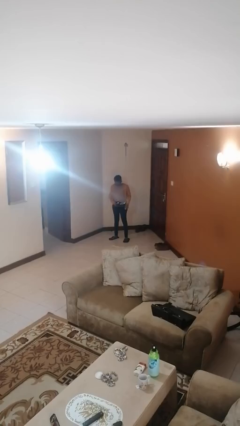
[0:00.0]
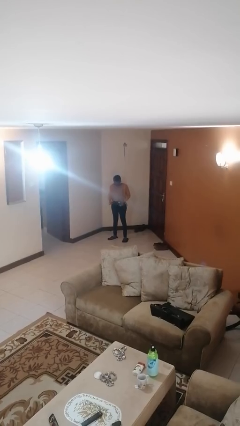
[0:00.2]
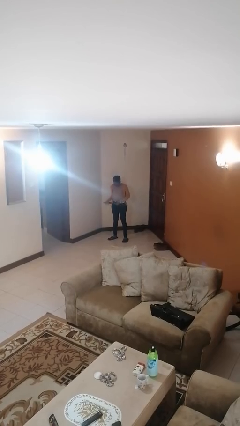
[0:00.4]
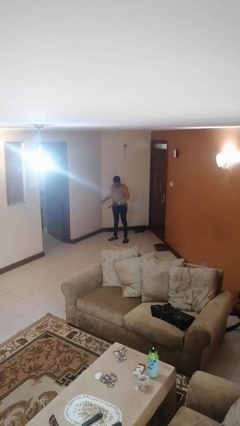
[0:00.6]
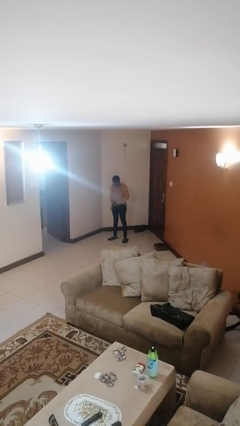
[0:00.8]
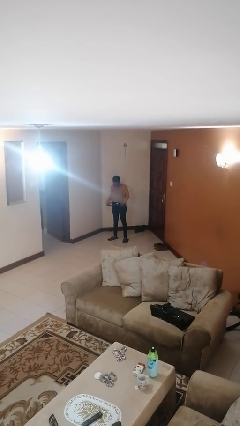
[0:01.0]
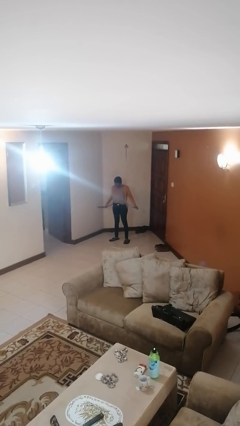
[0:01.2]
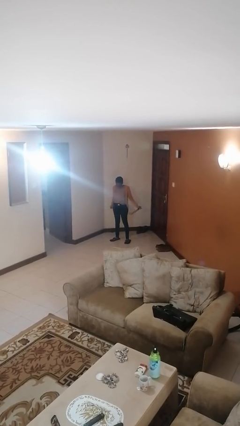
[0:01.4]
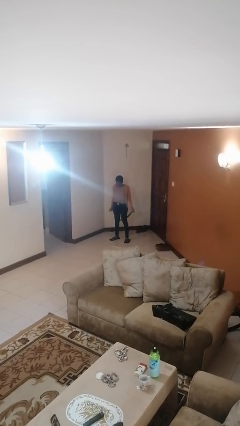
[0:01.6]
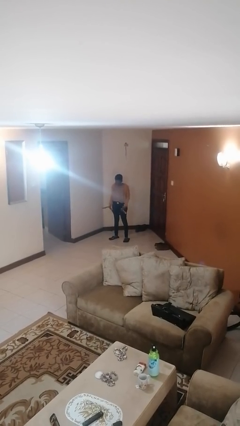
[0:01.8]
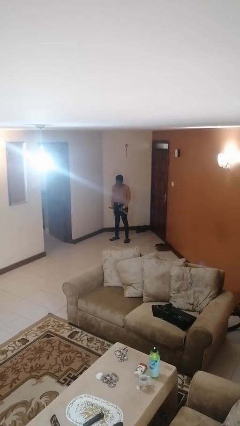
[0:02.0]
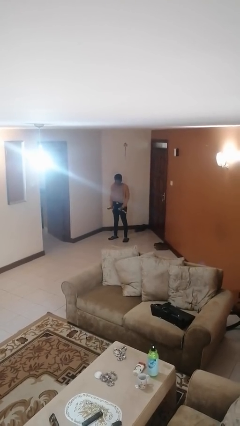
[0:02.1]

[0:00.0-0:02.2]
person takes off belt

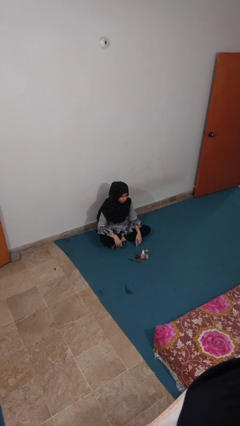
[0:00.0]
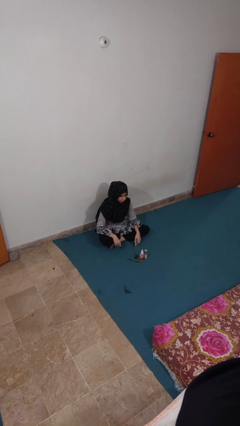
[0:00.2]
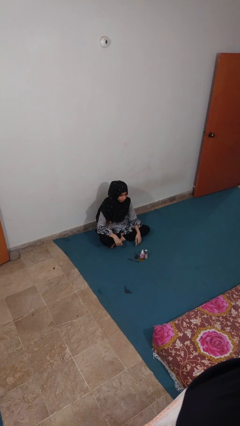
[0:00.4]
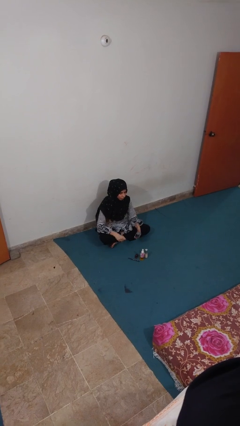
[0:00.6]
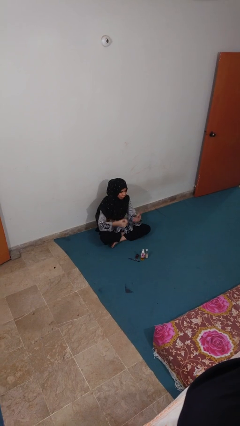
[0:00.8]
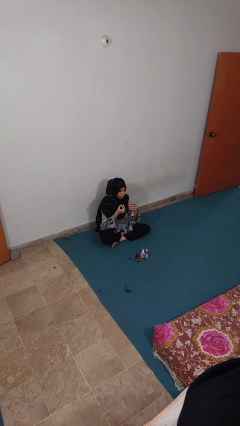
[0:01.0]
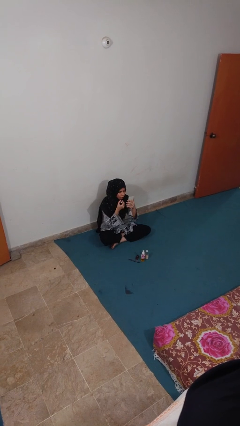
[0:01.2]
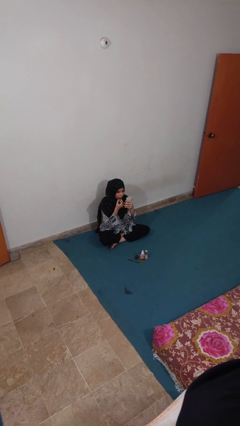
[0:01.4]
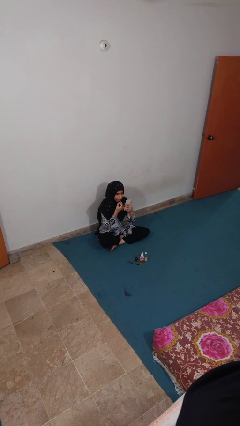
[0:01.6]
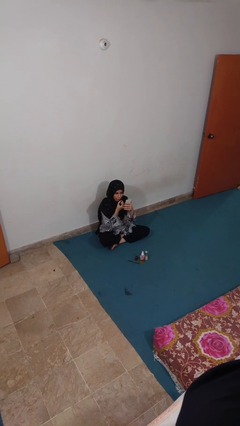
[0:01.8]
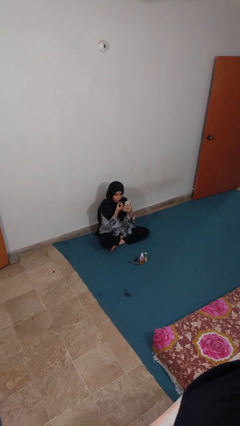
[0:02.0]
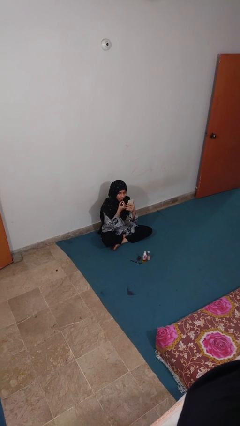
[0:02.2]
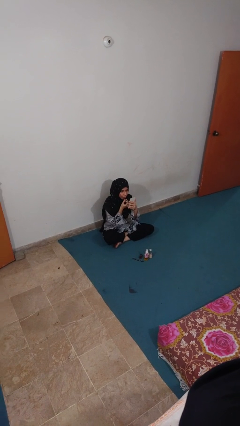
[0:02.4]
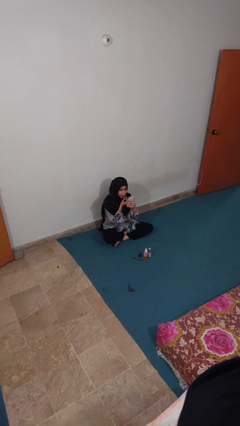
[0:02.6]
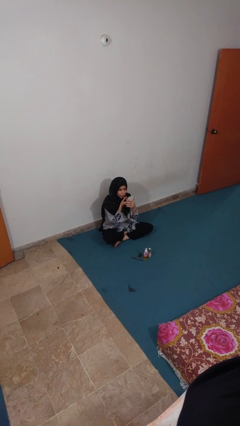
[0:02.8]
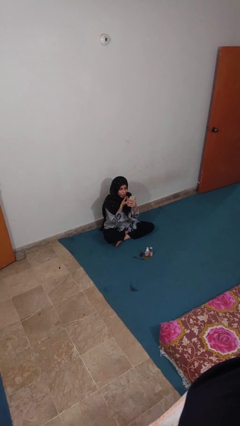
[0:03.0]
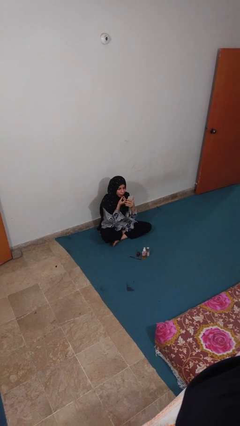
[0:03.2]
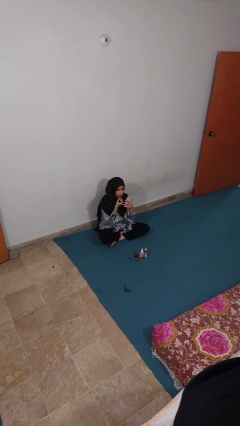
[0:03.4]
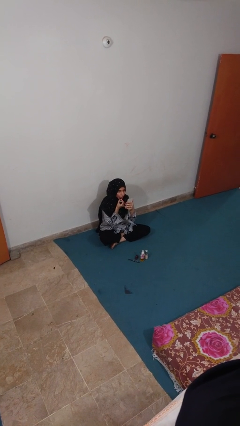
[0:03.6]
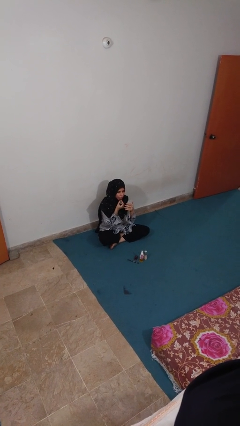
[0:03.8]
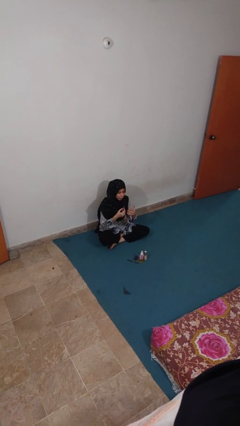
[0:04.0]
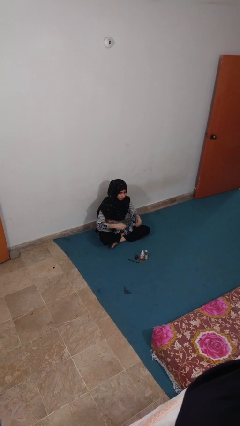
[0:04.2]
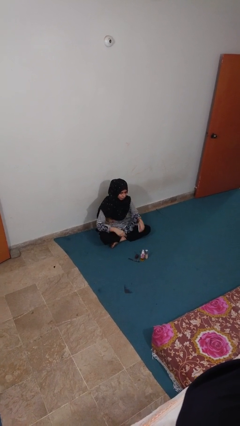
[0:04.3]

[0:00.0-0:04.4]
person applies lip makeup

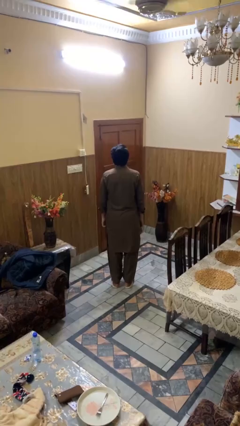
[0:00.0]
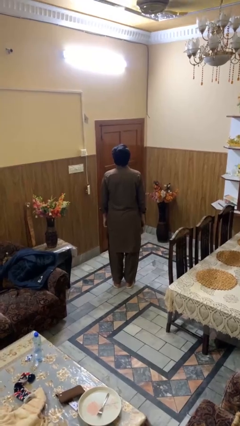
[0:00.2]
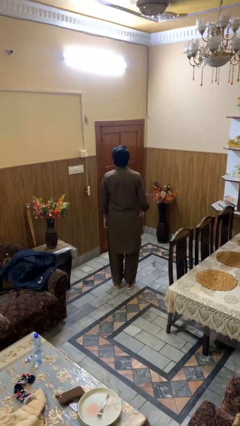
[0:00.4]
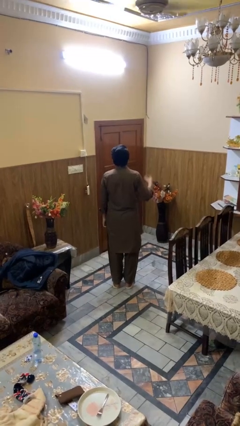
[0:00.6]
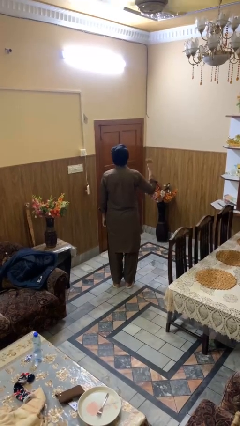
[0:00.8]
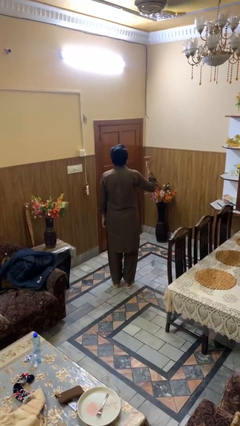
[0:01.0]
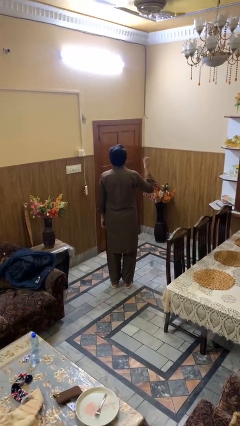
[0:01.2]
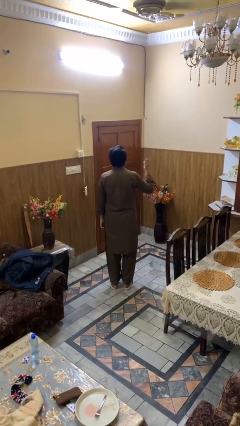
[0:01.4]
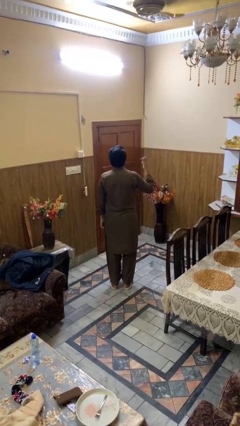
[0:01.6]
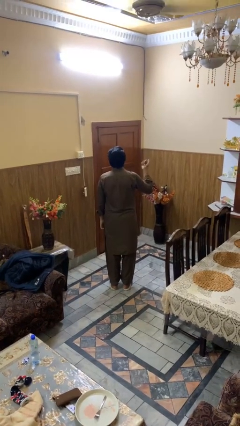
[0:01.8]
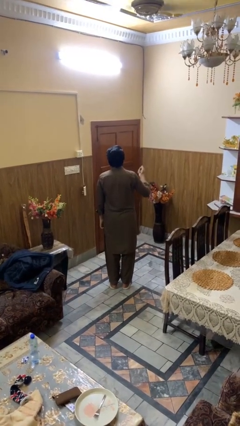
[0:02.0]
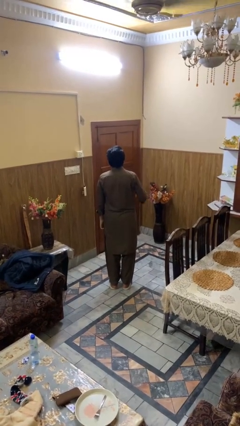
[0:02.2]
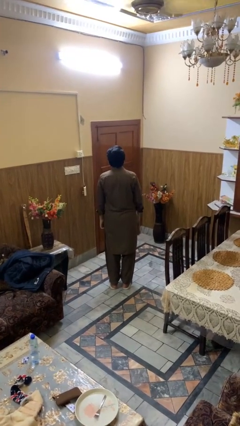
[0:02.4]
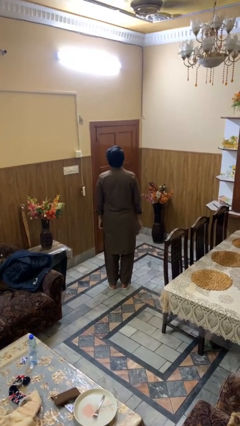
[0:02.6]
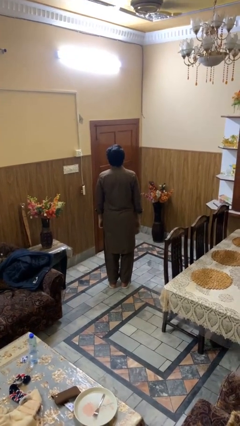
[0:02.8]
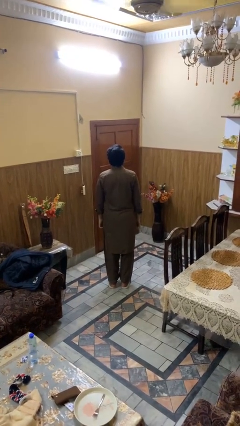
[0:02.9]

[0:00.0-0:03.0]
person snaps fingers

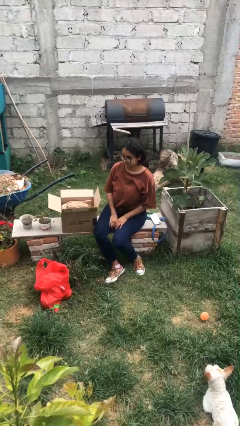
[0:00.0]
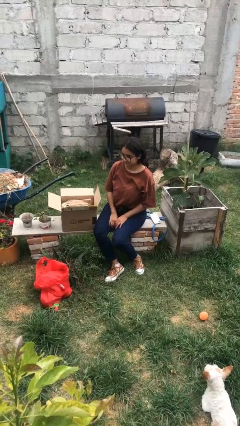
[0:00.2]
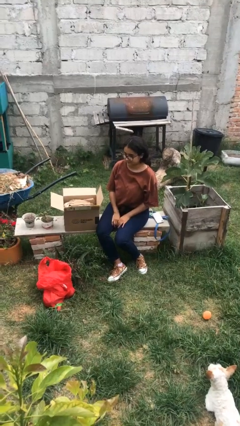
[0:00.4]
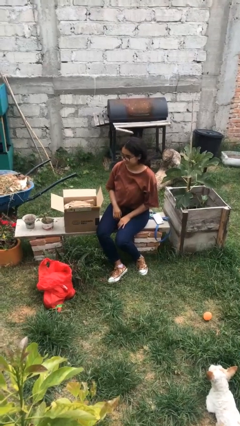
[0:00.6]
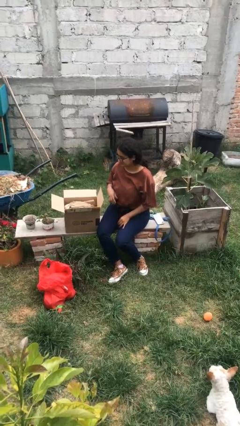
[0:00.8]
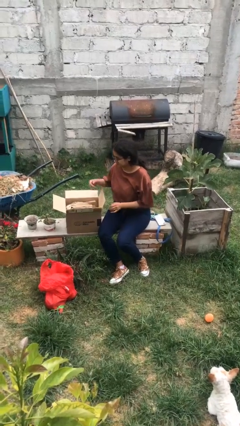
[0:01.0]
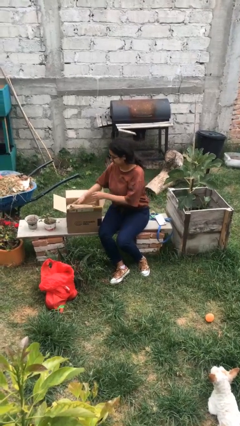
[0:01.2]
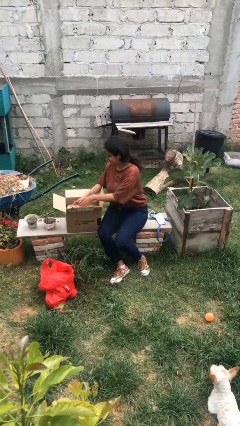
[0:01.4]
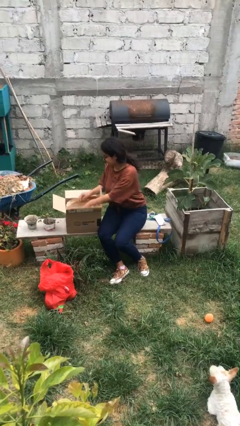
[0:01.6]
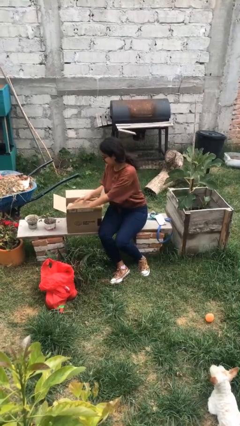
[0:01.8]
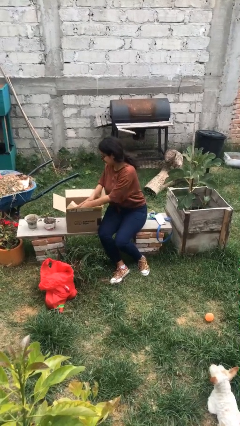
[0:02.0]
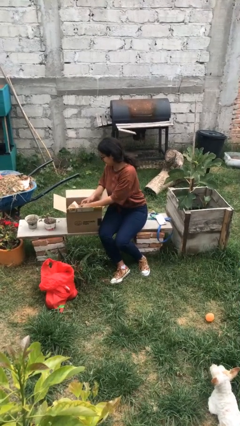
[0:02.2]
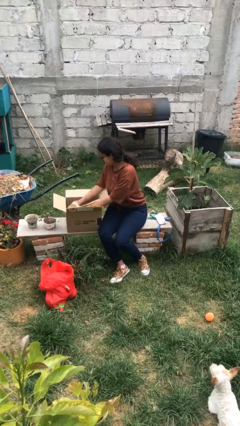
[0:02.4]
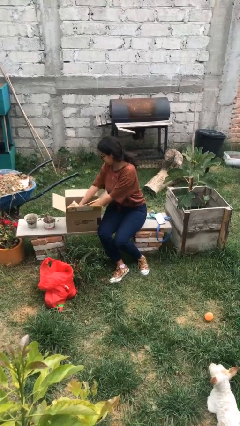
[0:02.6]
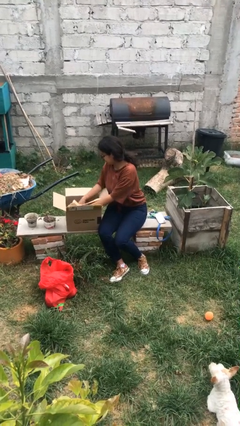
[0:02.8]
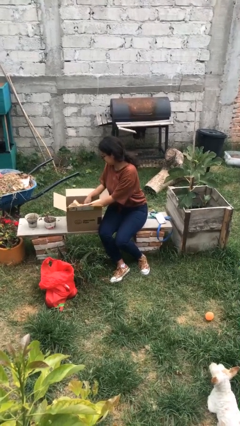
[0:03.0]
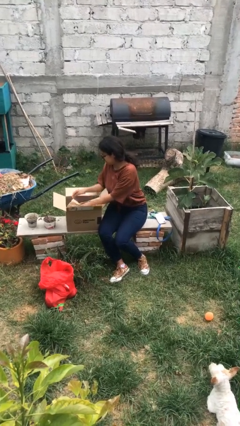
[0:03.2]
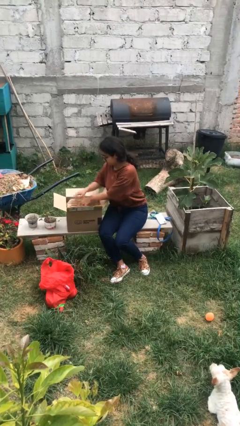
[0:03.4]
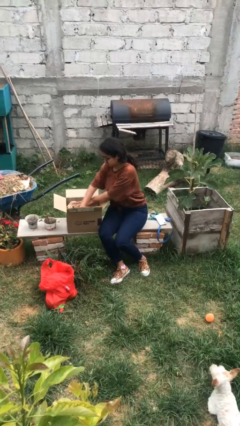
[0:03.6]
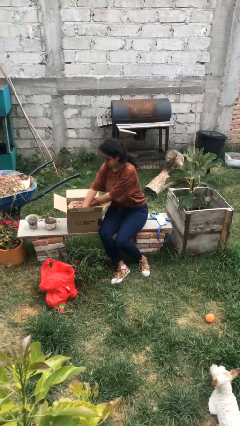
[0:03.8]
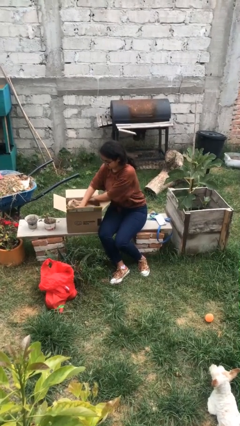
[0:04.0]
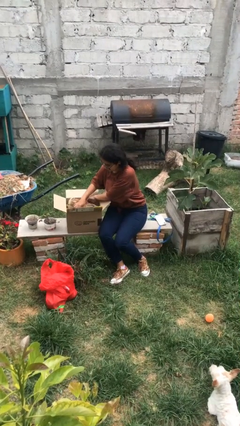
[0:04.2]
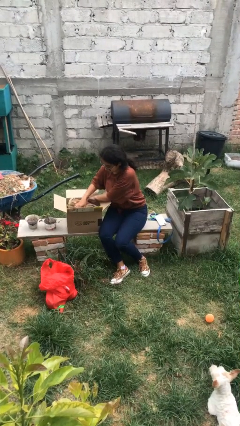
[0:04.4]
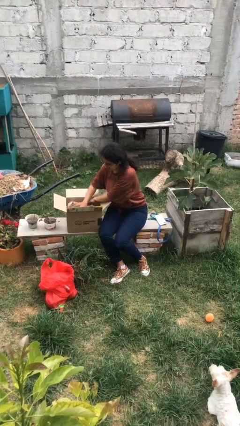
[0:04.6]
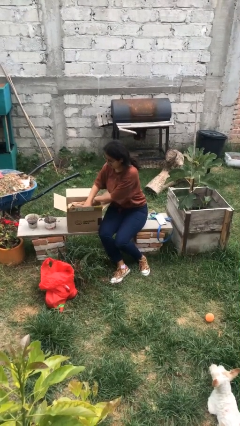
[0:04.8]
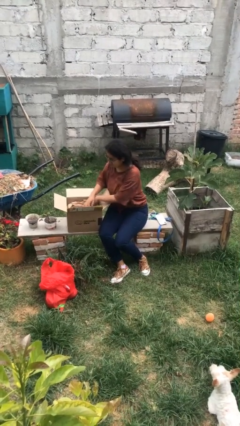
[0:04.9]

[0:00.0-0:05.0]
person searches in box

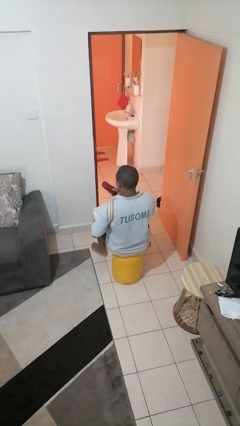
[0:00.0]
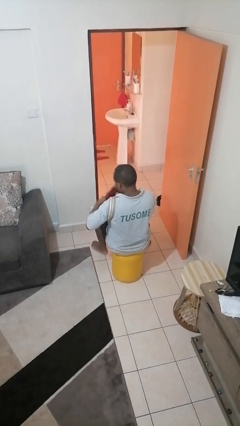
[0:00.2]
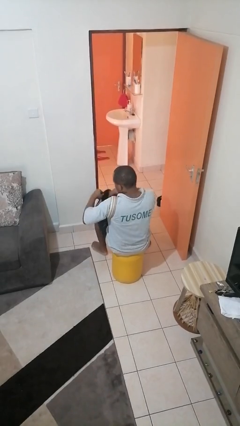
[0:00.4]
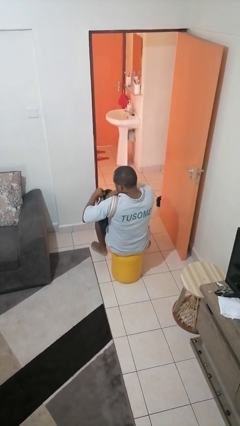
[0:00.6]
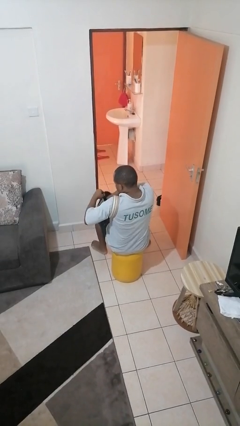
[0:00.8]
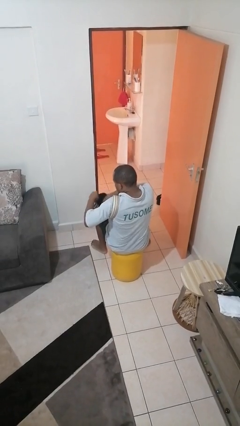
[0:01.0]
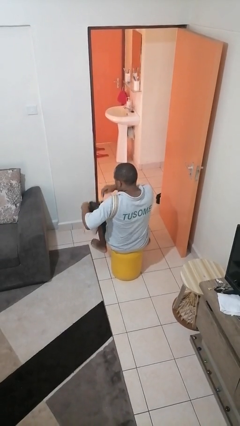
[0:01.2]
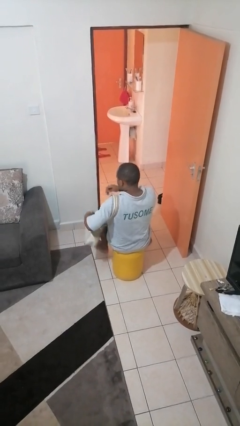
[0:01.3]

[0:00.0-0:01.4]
person puts object into purse

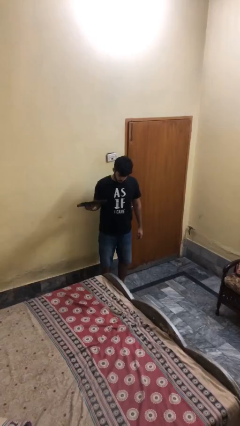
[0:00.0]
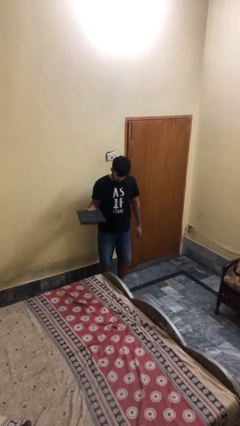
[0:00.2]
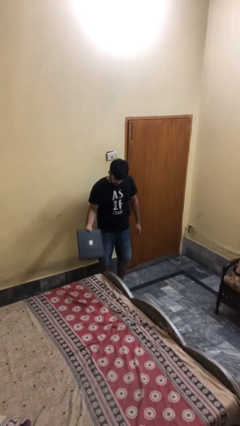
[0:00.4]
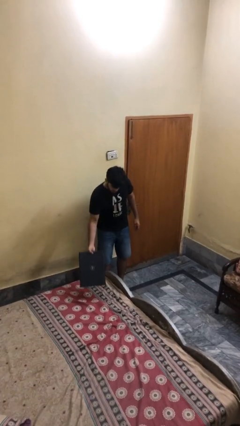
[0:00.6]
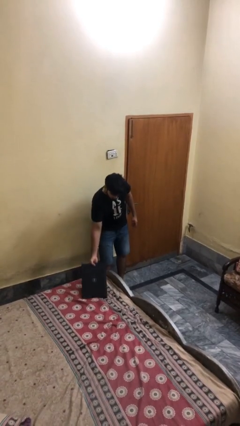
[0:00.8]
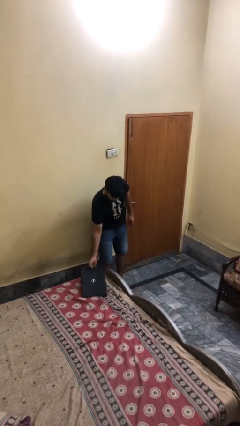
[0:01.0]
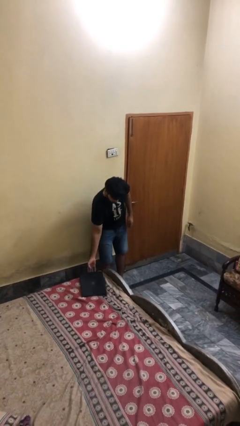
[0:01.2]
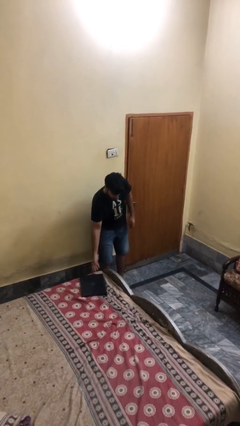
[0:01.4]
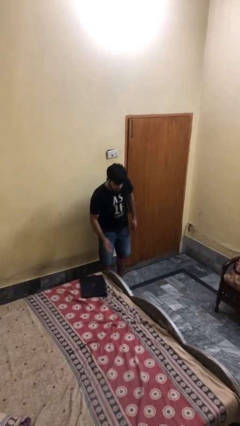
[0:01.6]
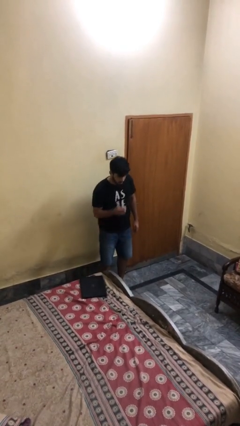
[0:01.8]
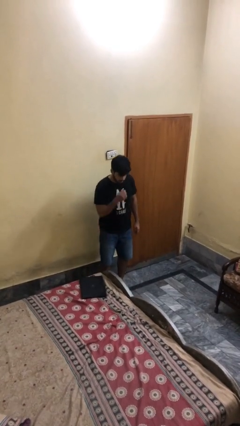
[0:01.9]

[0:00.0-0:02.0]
person puts down object on bed
